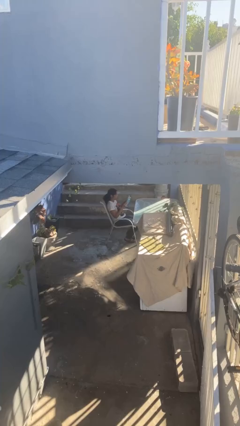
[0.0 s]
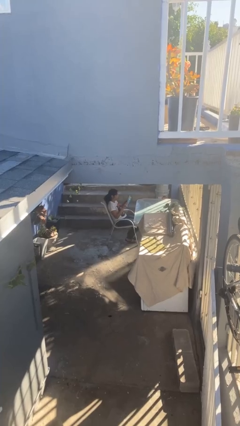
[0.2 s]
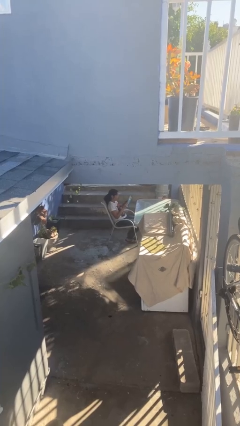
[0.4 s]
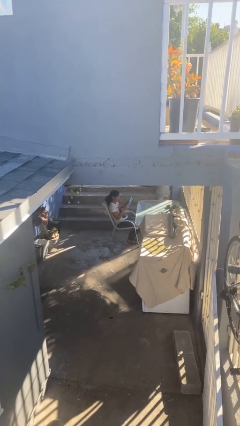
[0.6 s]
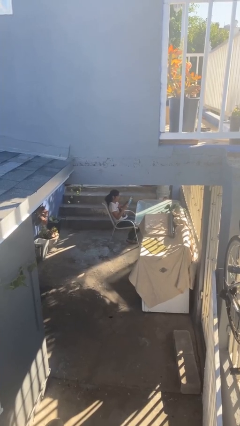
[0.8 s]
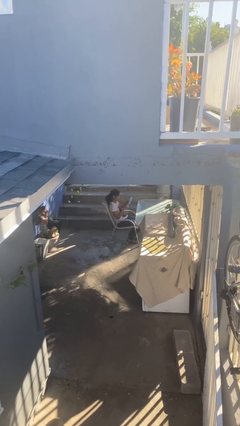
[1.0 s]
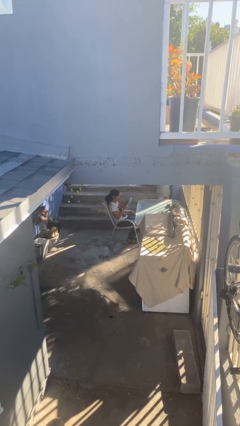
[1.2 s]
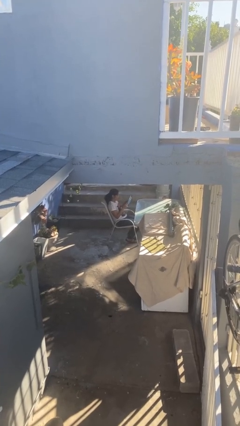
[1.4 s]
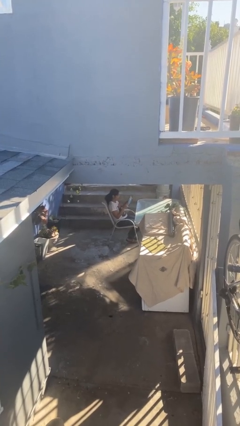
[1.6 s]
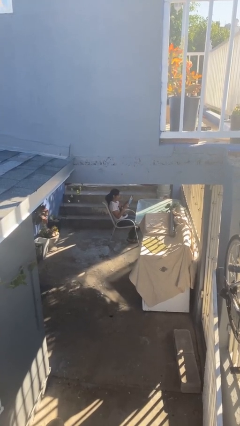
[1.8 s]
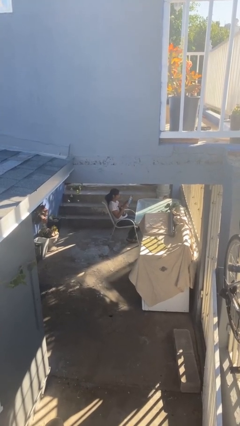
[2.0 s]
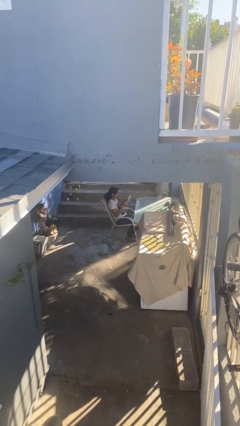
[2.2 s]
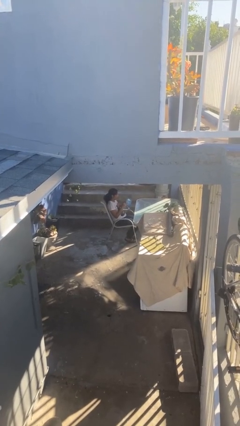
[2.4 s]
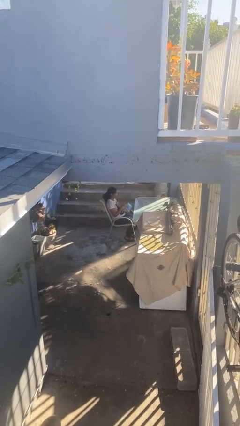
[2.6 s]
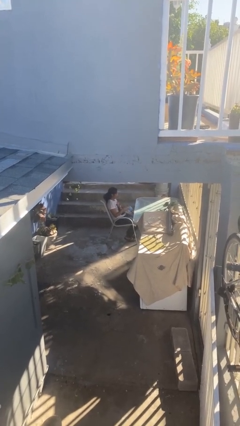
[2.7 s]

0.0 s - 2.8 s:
person reads document

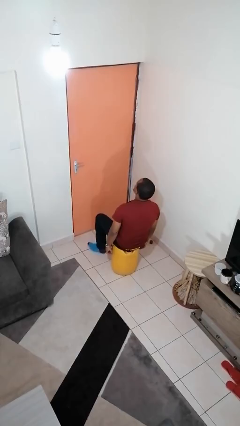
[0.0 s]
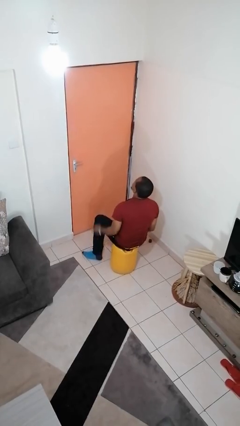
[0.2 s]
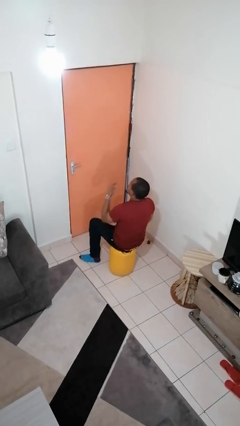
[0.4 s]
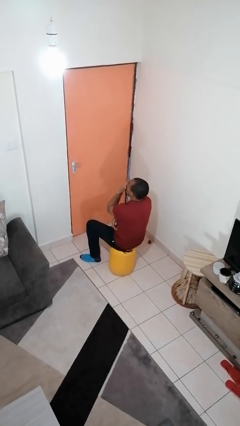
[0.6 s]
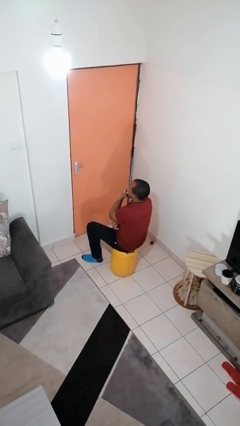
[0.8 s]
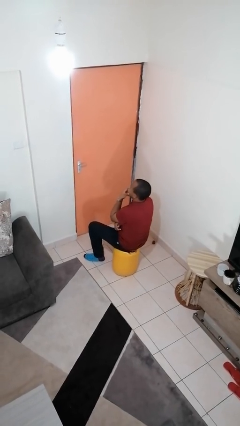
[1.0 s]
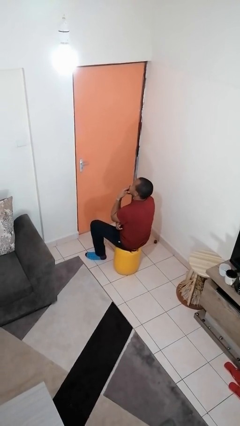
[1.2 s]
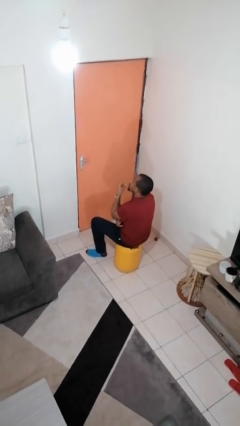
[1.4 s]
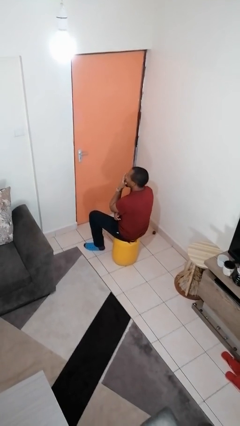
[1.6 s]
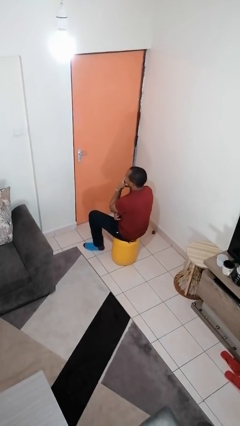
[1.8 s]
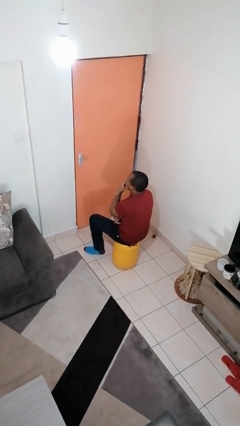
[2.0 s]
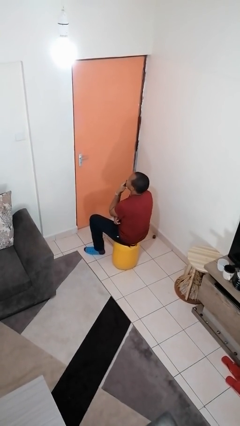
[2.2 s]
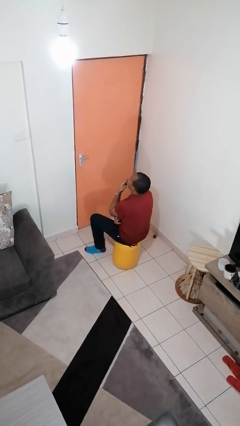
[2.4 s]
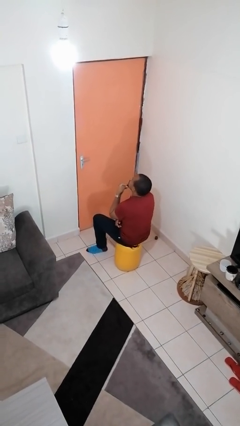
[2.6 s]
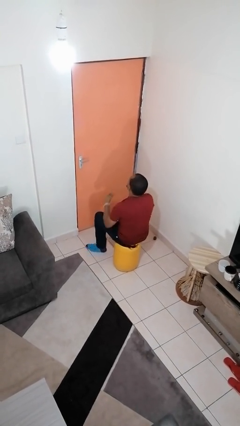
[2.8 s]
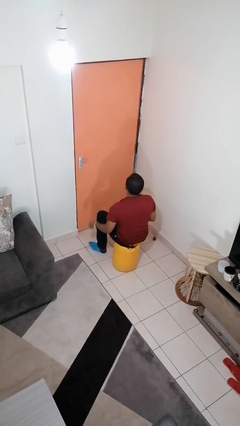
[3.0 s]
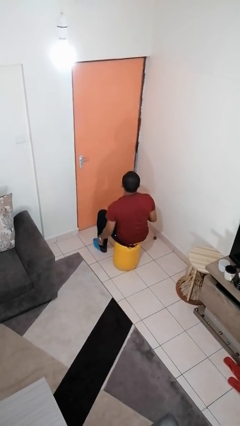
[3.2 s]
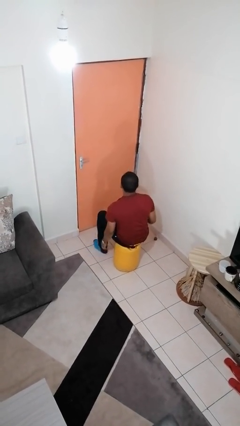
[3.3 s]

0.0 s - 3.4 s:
person strokes chin

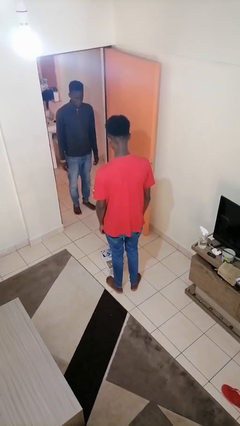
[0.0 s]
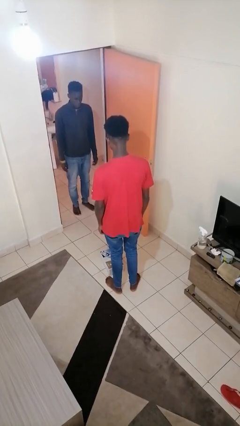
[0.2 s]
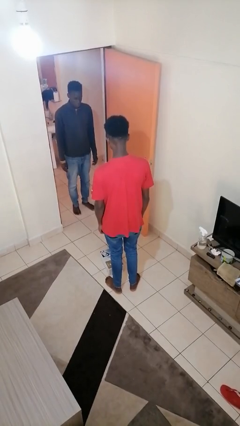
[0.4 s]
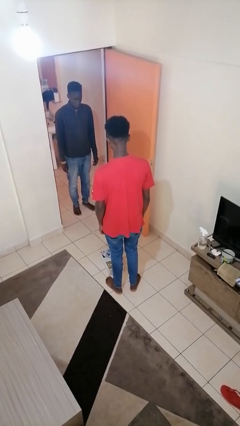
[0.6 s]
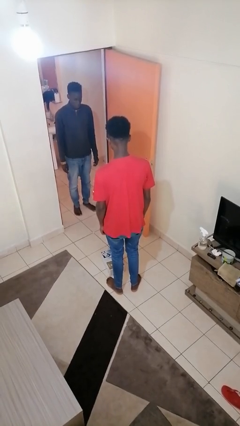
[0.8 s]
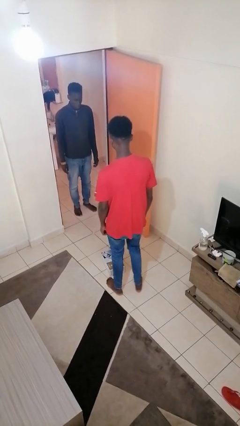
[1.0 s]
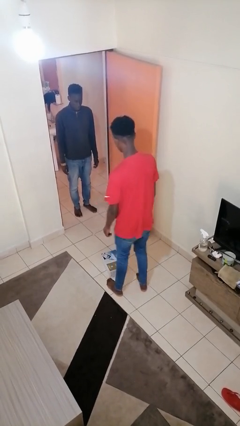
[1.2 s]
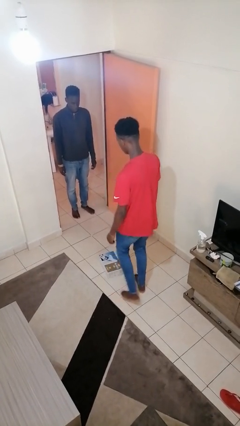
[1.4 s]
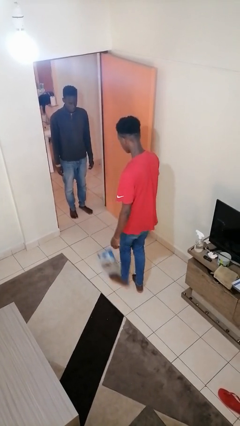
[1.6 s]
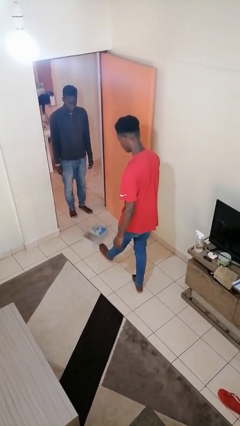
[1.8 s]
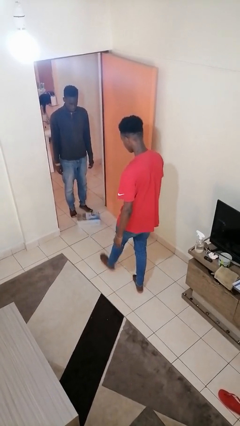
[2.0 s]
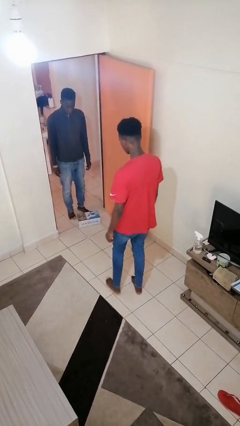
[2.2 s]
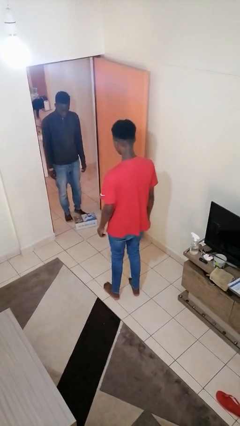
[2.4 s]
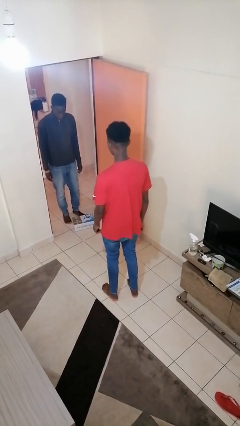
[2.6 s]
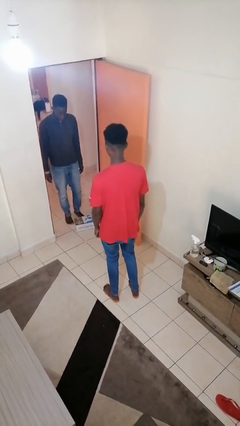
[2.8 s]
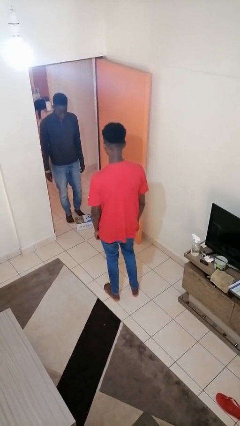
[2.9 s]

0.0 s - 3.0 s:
person kicks object to person

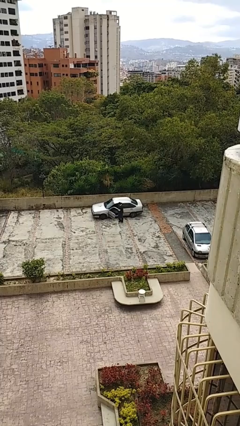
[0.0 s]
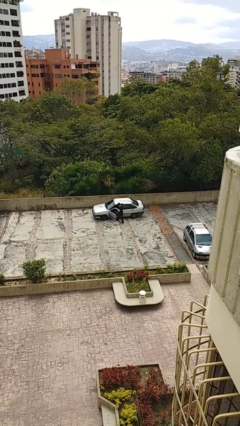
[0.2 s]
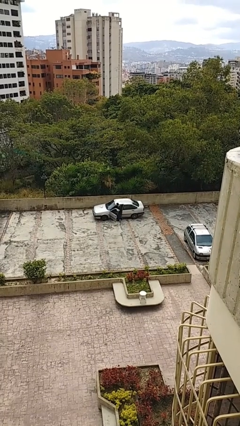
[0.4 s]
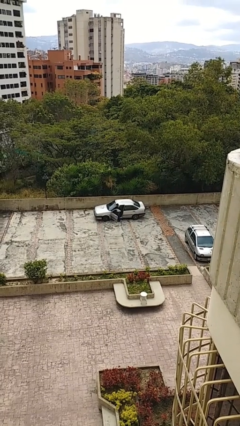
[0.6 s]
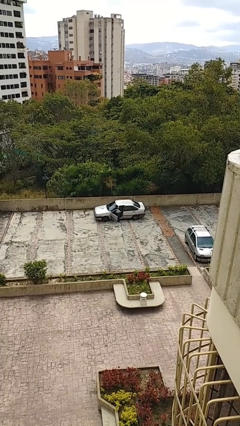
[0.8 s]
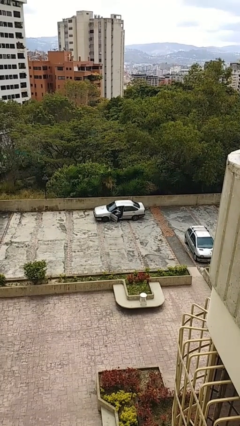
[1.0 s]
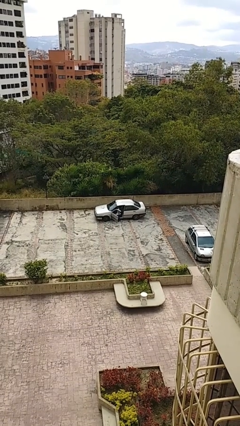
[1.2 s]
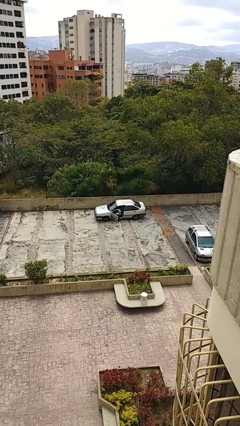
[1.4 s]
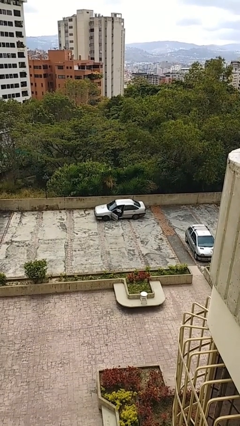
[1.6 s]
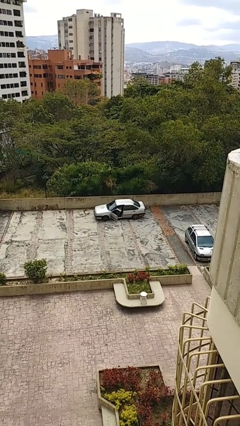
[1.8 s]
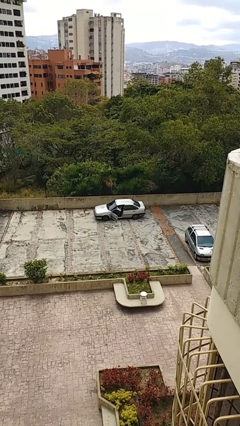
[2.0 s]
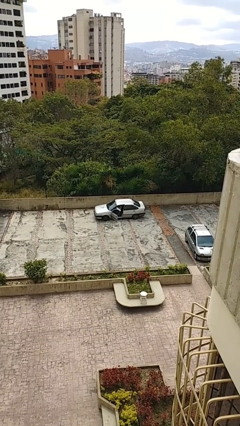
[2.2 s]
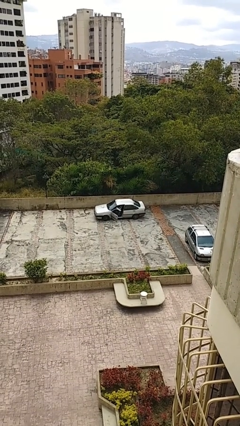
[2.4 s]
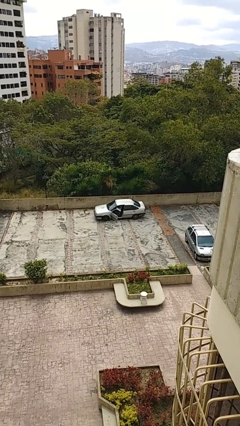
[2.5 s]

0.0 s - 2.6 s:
person enters car

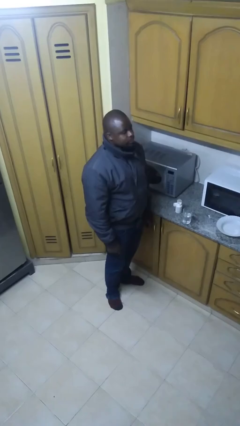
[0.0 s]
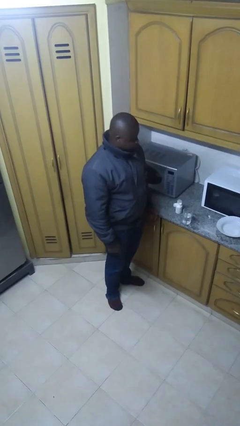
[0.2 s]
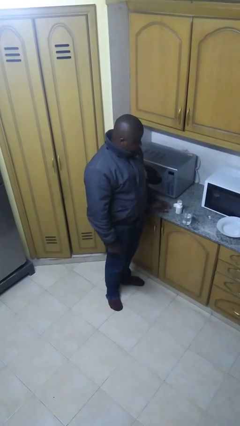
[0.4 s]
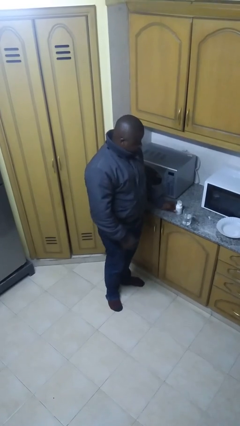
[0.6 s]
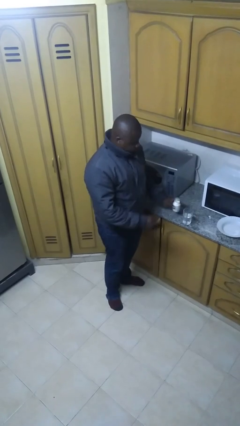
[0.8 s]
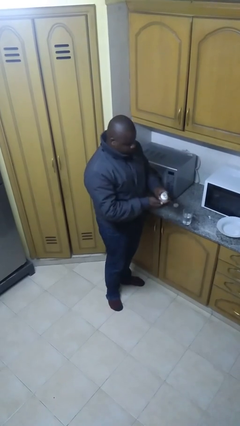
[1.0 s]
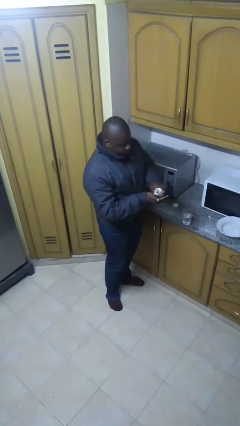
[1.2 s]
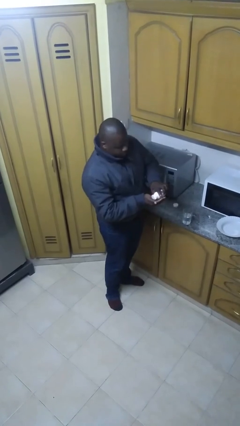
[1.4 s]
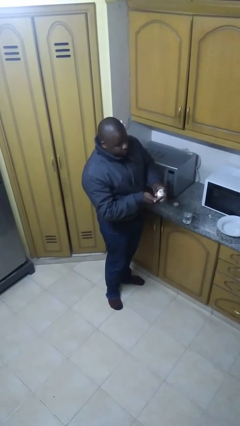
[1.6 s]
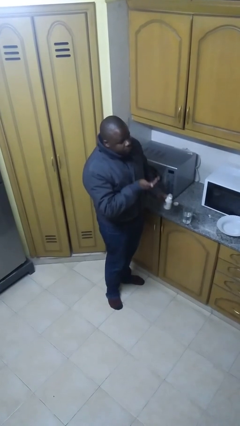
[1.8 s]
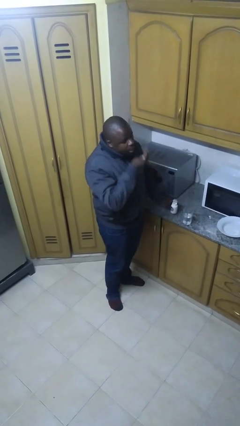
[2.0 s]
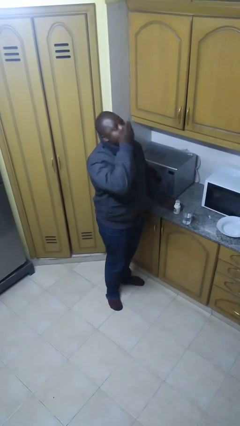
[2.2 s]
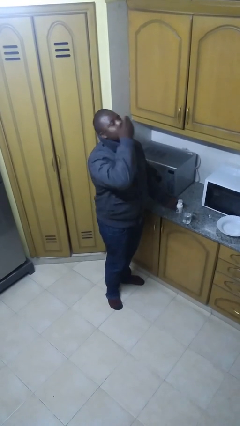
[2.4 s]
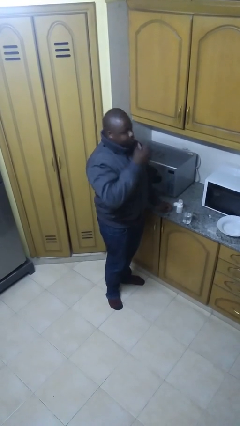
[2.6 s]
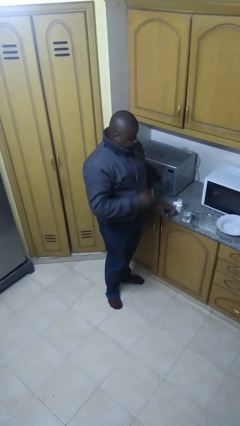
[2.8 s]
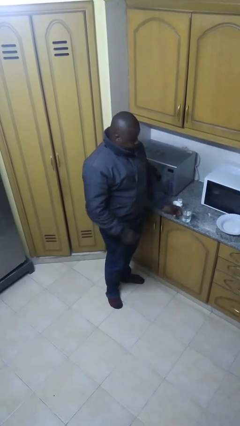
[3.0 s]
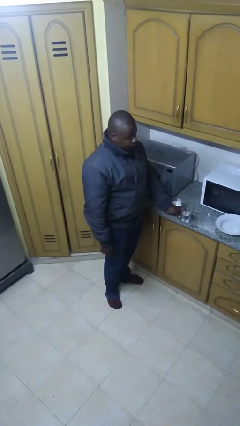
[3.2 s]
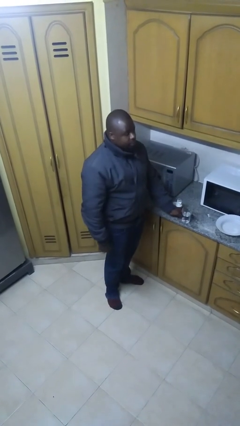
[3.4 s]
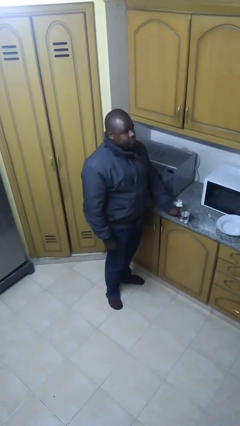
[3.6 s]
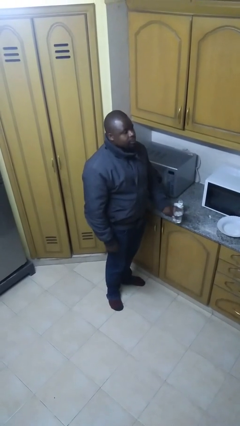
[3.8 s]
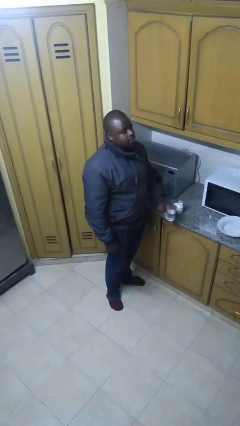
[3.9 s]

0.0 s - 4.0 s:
person takes medicine pills

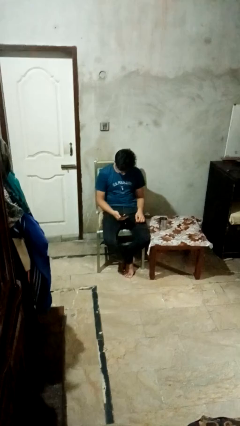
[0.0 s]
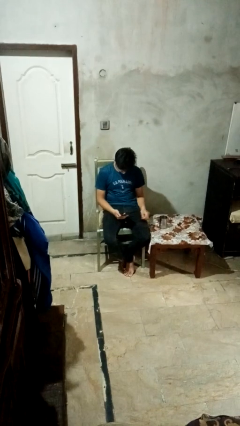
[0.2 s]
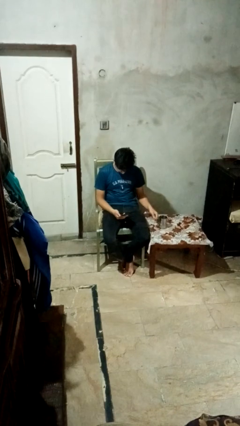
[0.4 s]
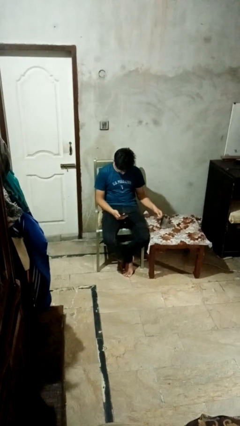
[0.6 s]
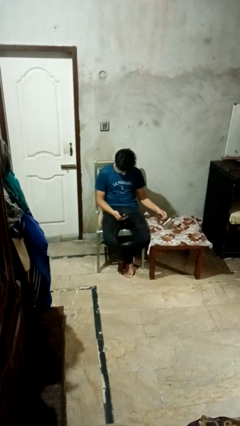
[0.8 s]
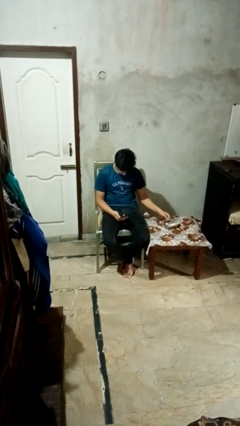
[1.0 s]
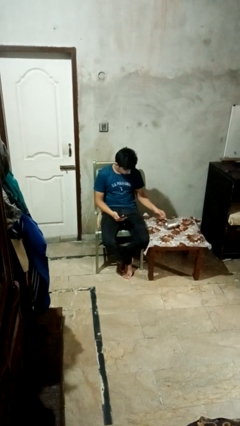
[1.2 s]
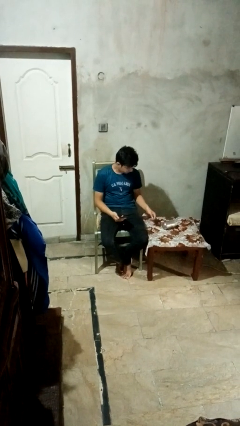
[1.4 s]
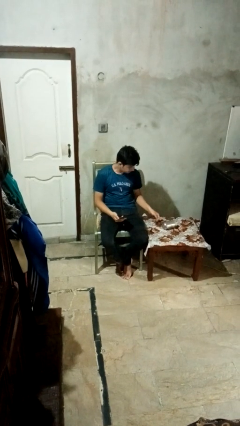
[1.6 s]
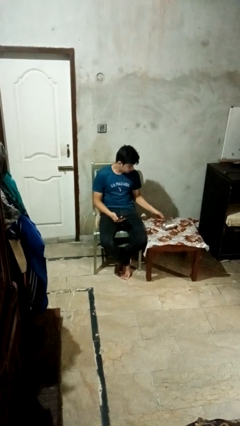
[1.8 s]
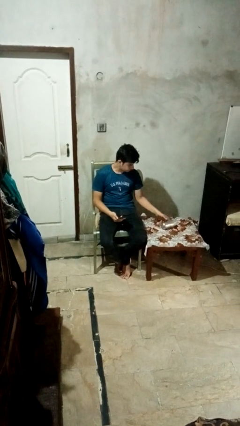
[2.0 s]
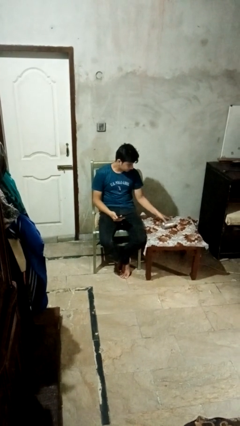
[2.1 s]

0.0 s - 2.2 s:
person knocks over glass
